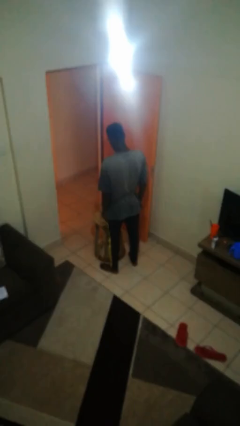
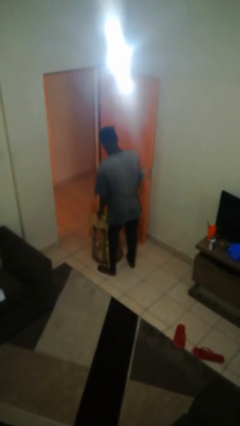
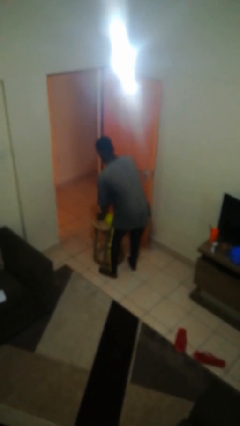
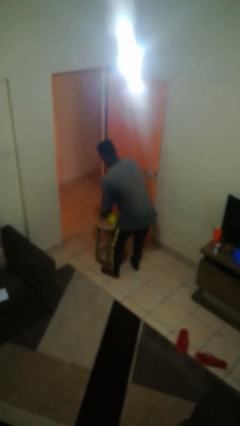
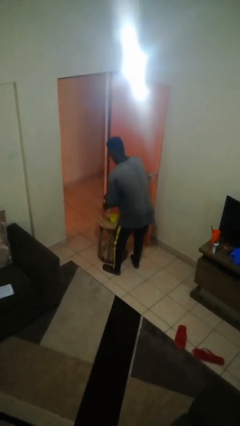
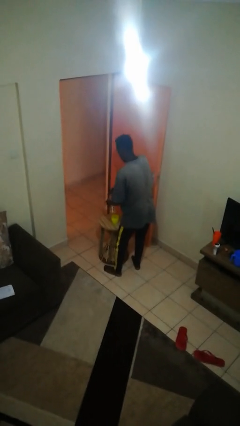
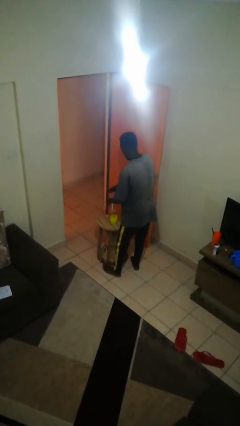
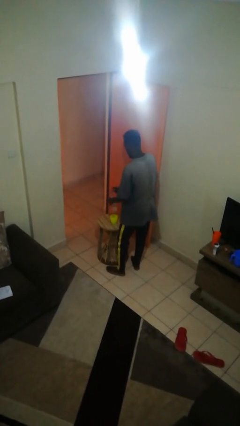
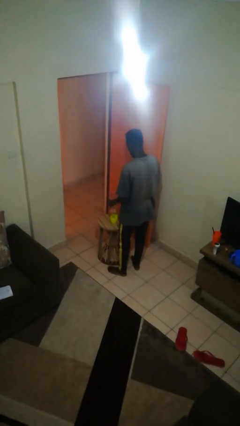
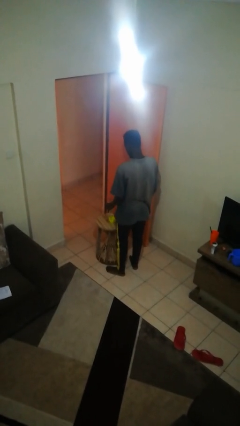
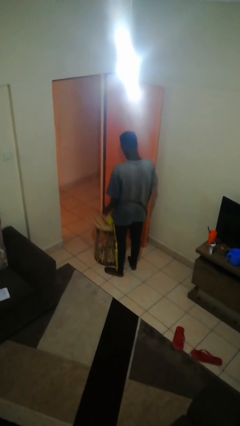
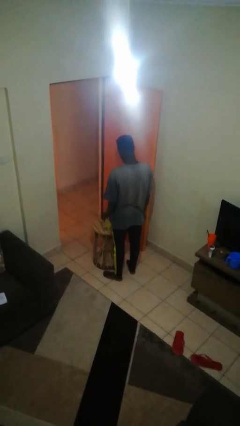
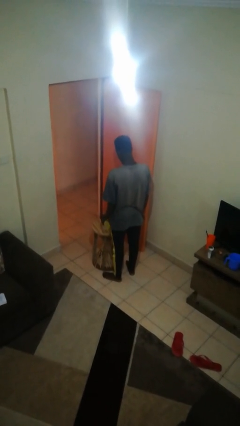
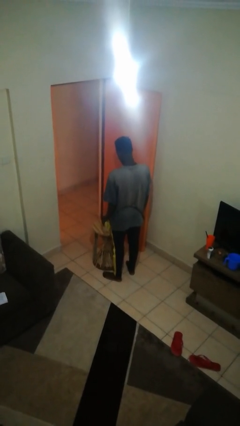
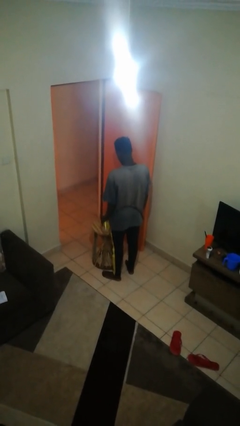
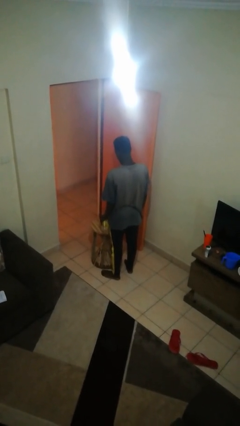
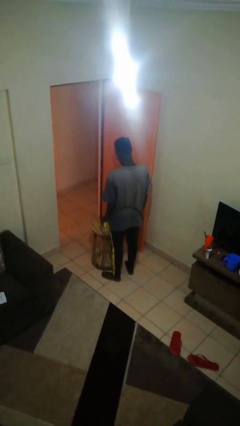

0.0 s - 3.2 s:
person unscrews lid from bottle

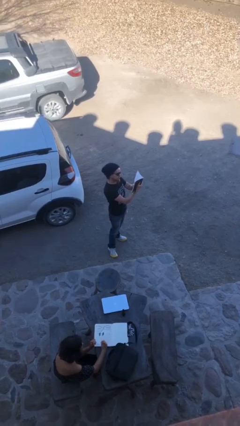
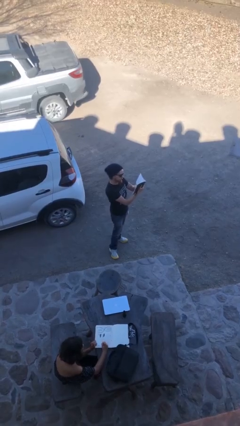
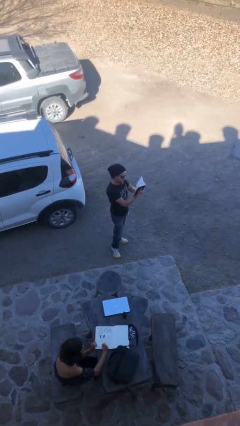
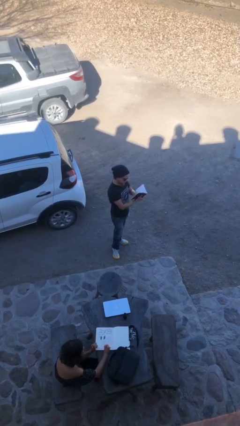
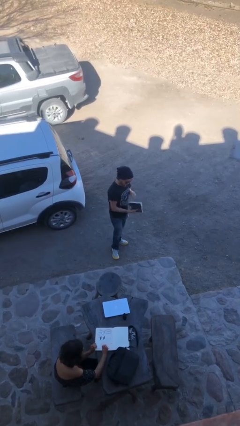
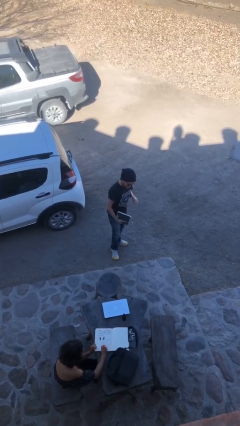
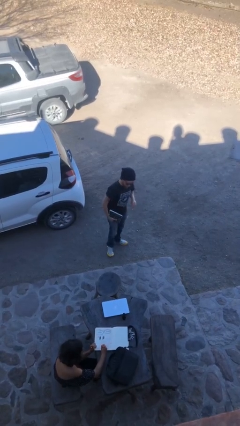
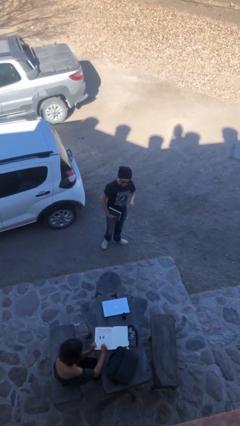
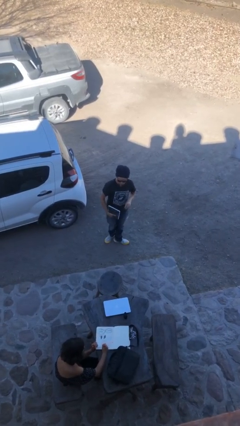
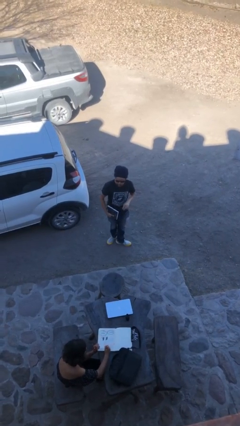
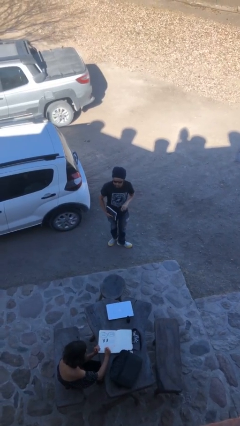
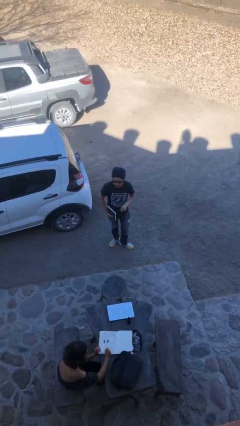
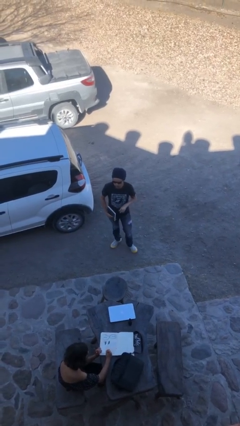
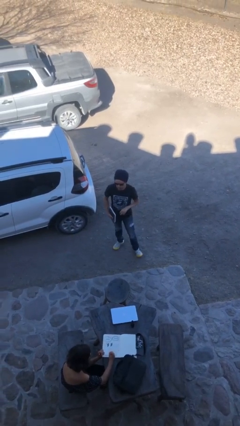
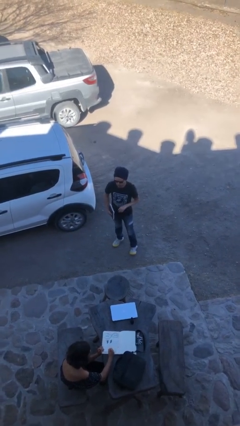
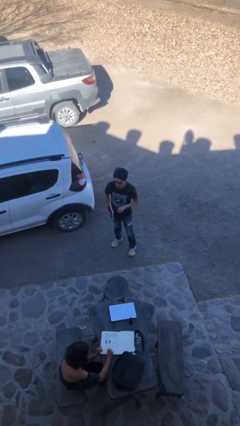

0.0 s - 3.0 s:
person reads document

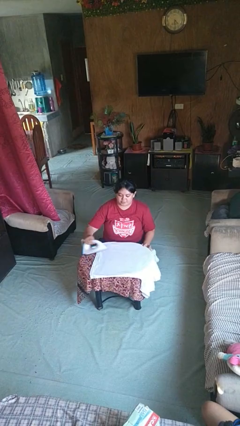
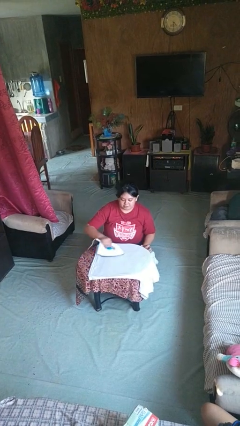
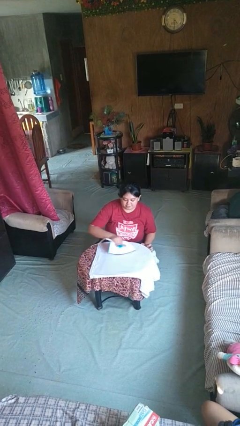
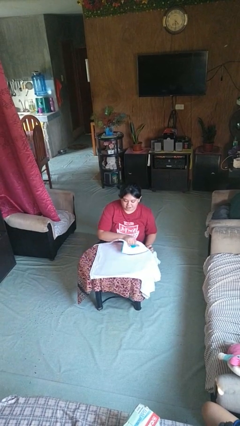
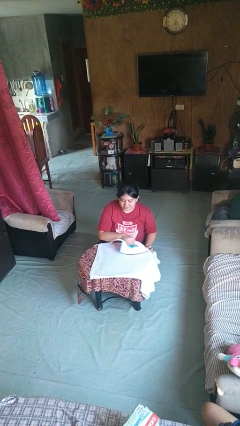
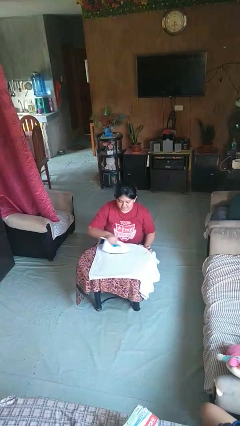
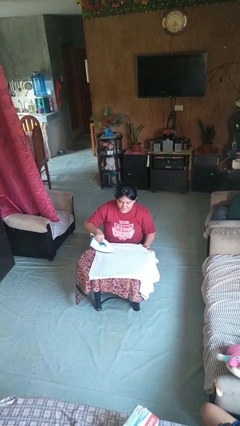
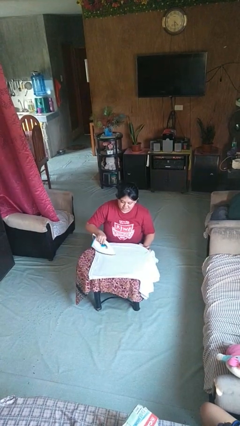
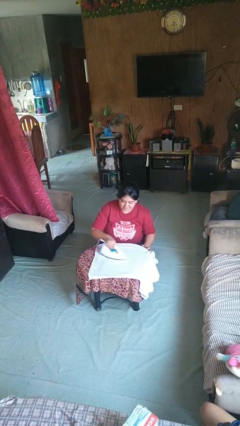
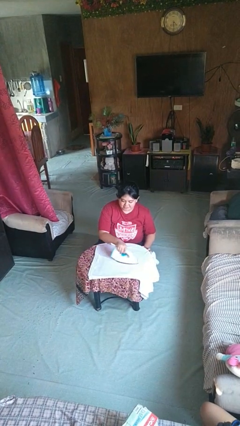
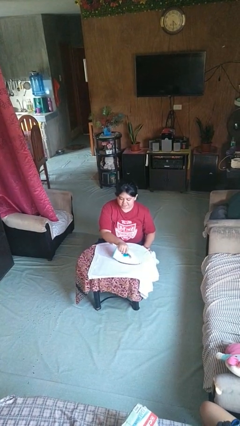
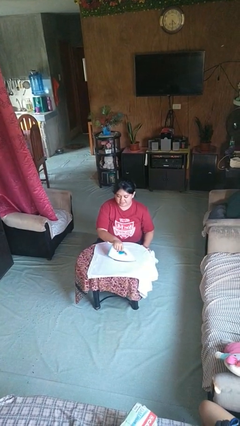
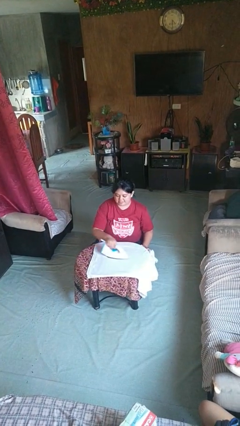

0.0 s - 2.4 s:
person irons clothes

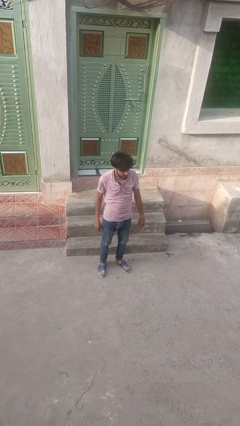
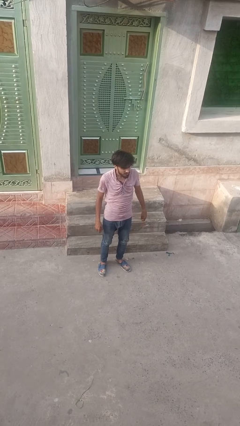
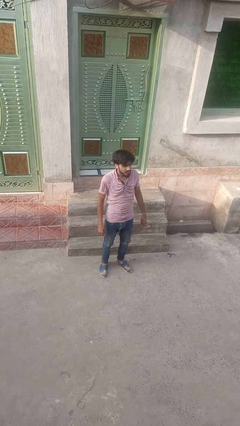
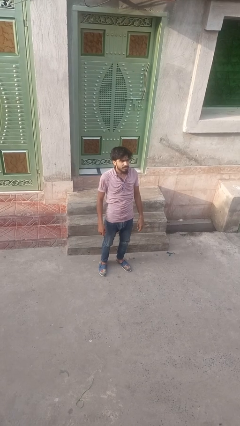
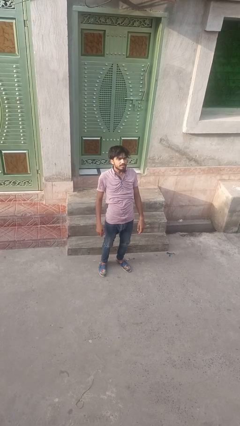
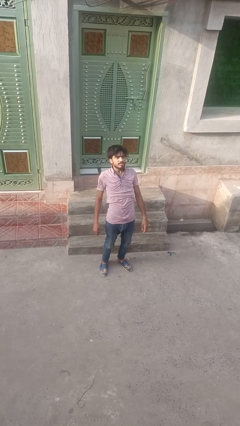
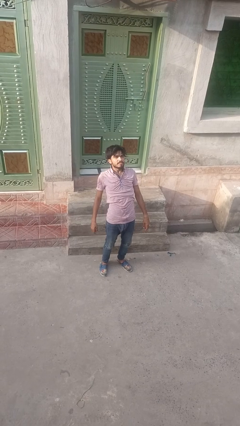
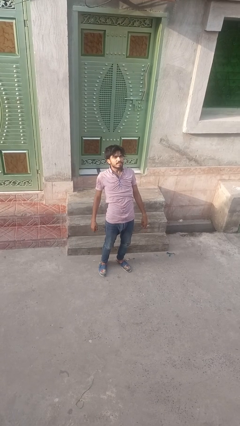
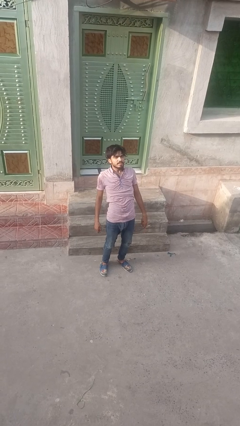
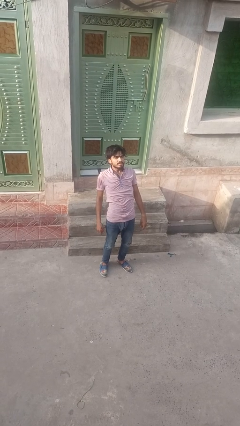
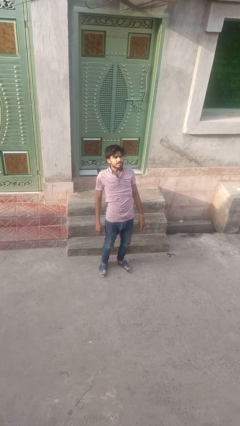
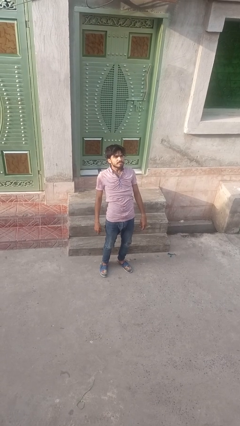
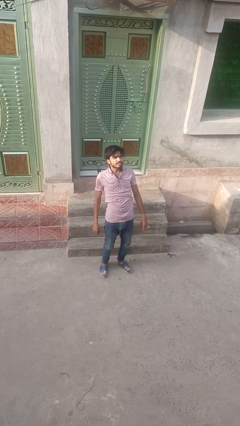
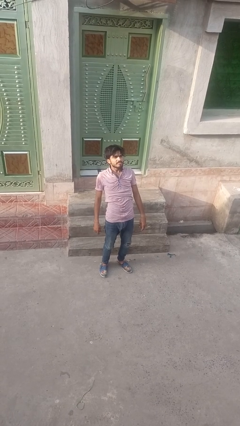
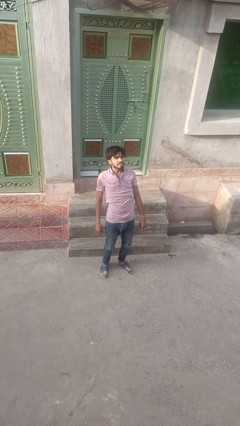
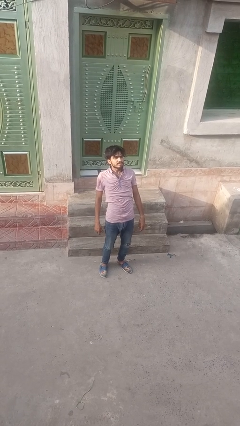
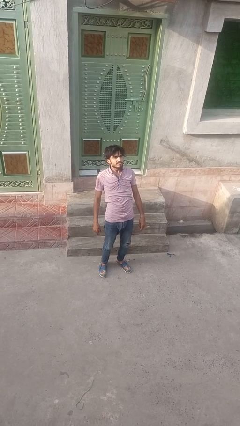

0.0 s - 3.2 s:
person stretches back

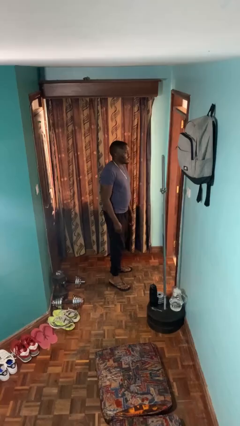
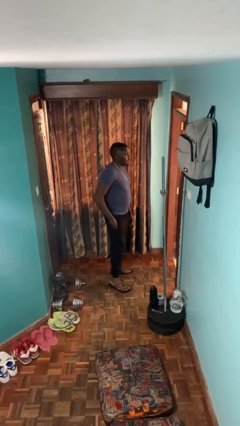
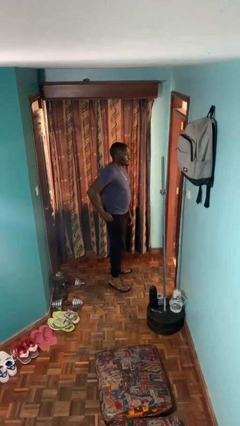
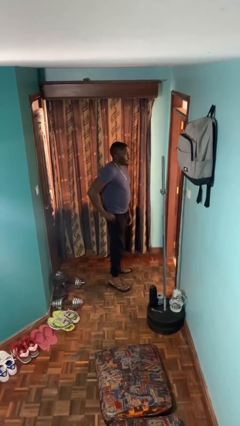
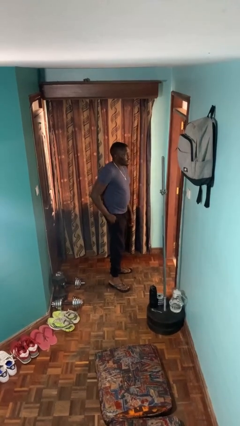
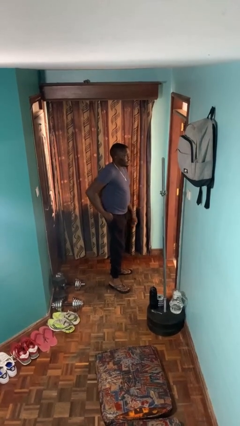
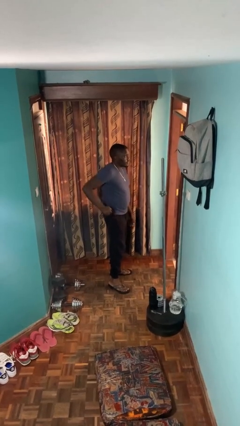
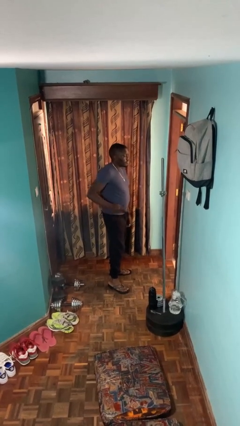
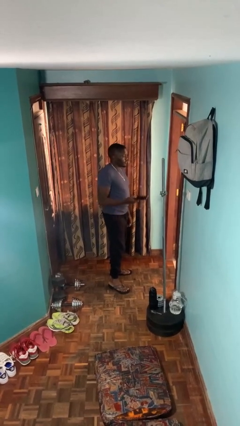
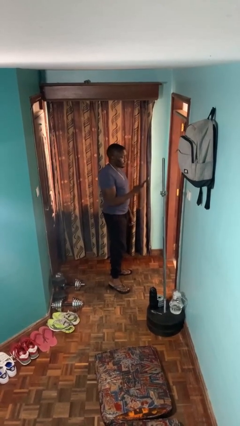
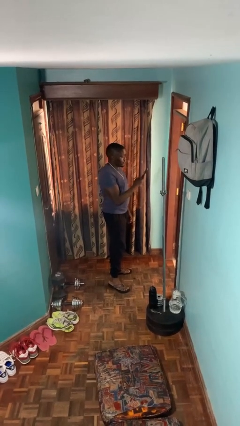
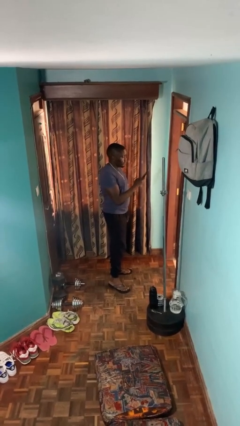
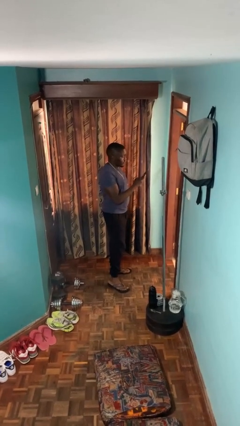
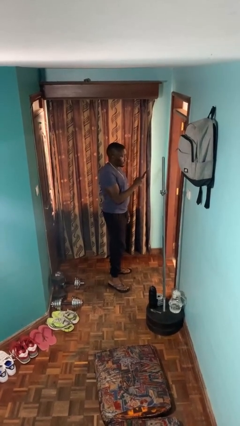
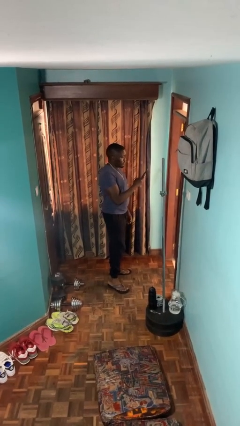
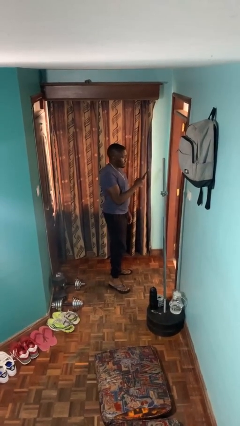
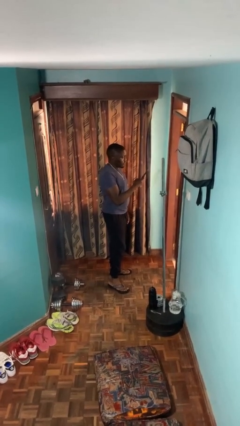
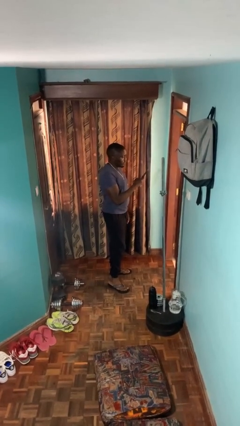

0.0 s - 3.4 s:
person takes phone from pocket

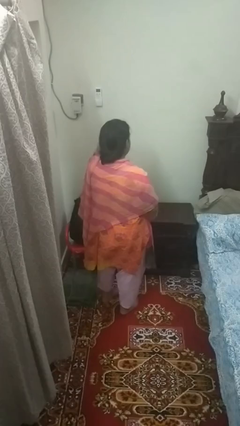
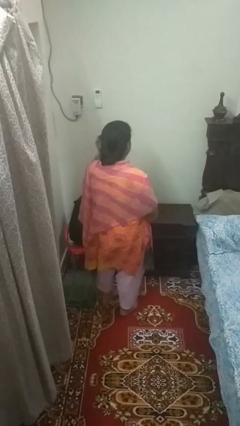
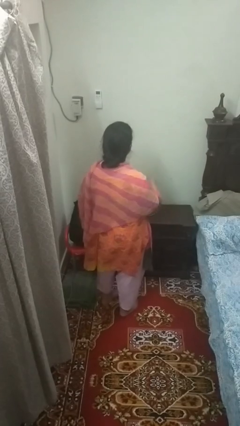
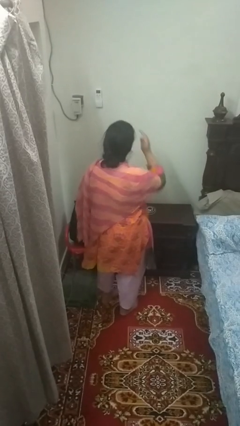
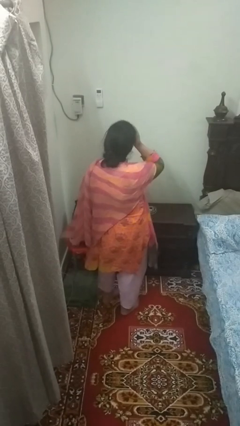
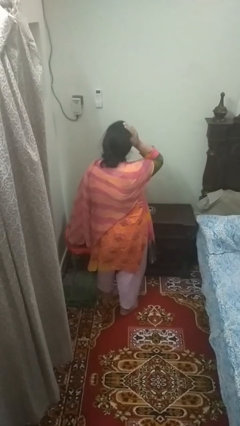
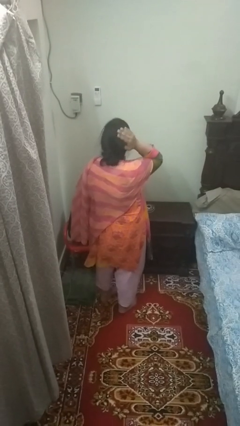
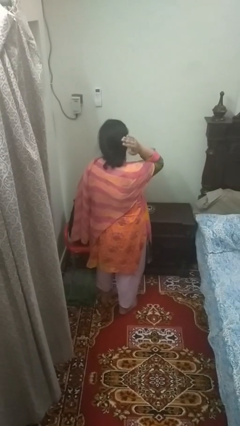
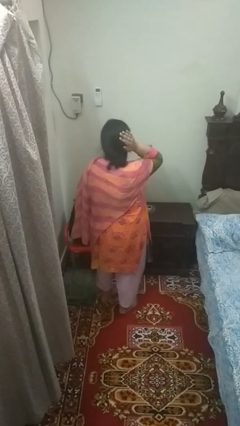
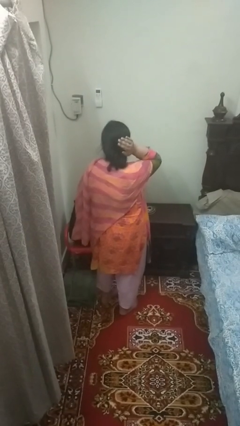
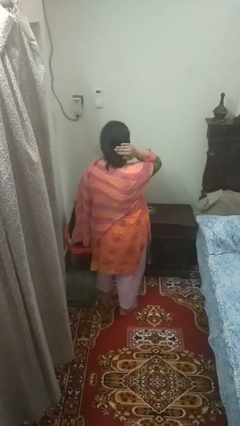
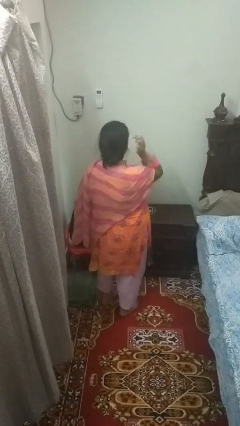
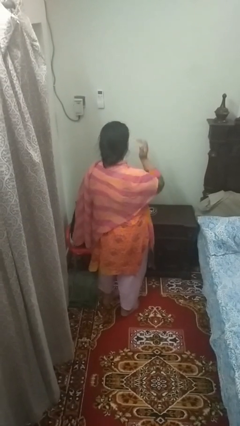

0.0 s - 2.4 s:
person strokes hair
